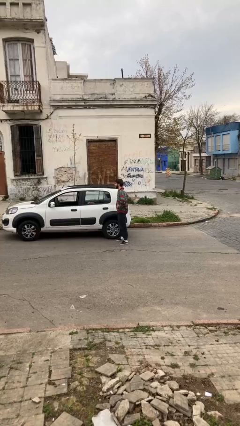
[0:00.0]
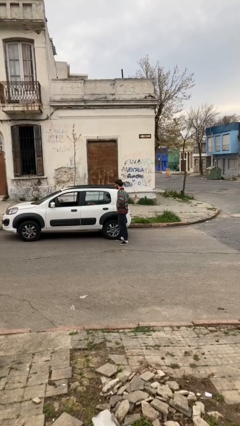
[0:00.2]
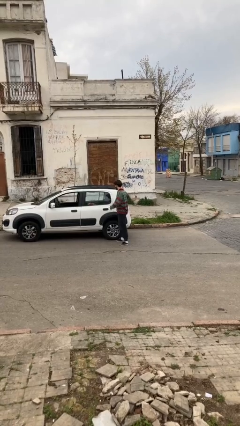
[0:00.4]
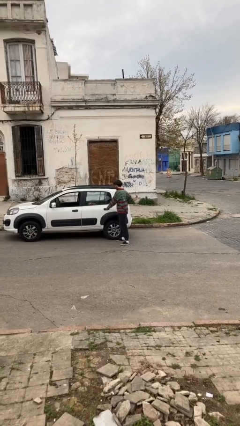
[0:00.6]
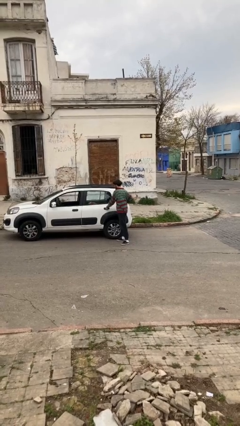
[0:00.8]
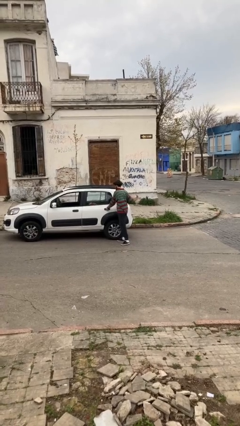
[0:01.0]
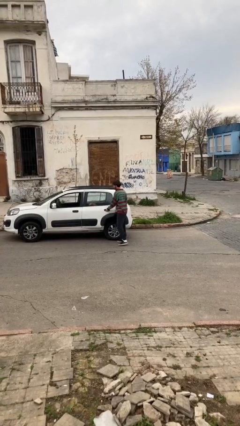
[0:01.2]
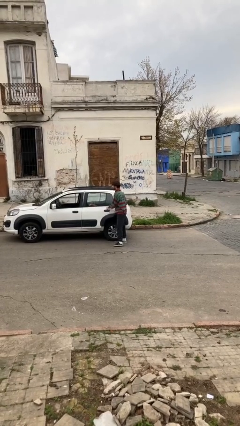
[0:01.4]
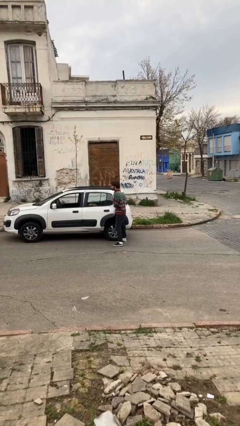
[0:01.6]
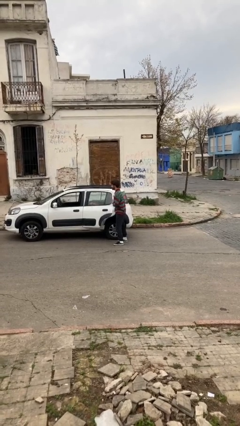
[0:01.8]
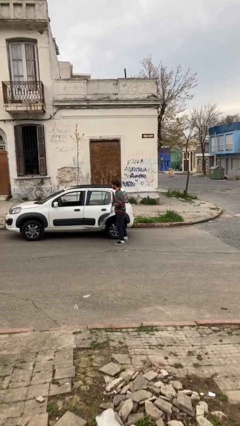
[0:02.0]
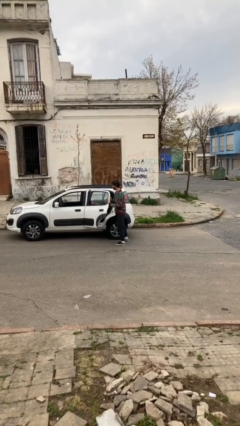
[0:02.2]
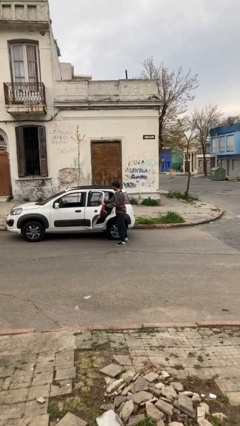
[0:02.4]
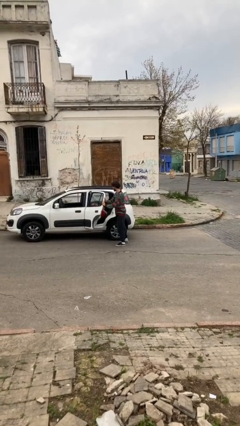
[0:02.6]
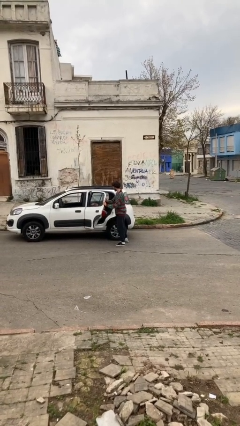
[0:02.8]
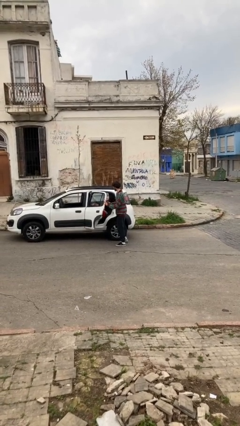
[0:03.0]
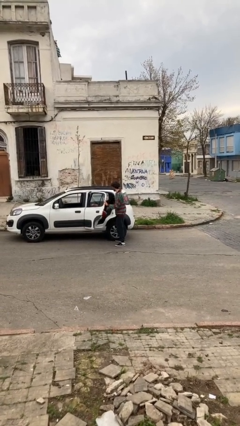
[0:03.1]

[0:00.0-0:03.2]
person opens car door

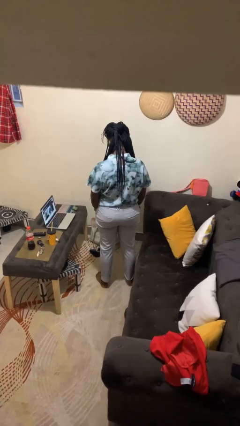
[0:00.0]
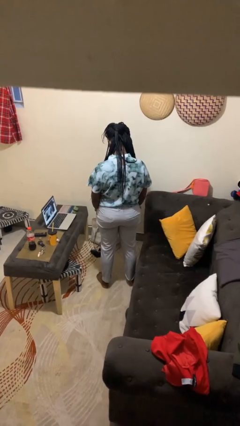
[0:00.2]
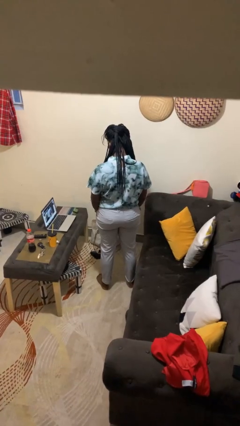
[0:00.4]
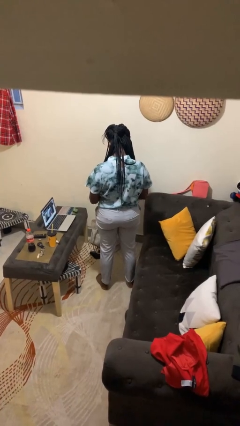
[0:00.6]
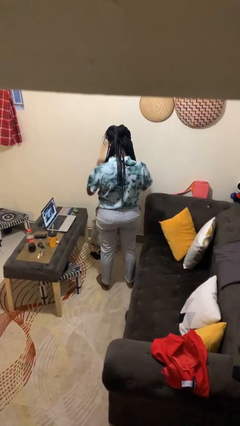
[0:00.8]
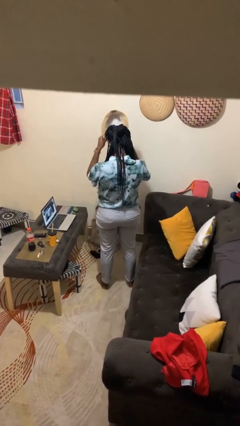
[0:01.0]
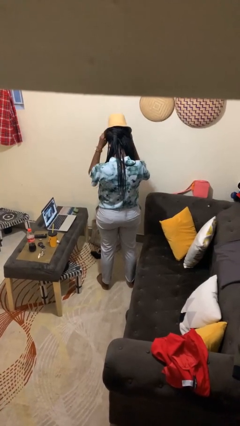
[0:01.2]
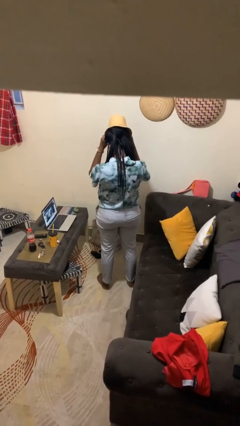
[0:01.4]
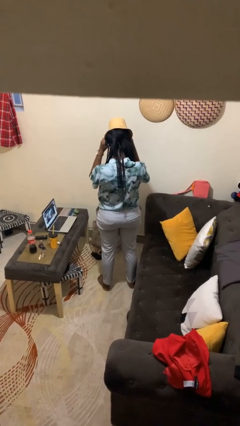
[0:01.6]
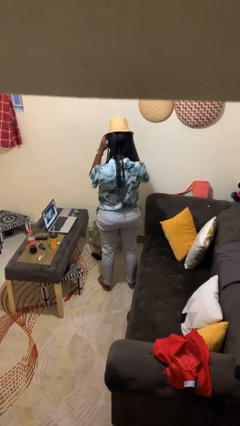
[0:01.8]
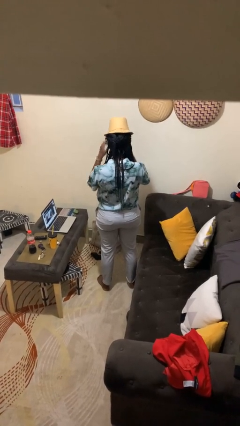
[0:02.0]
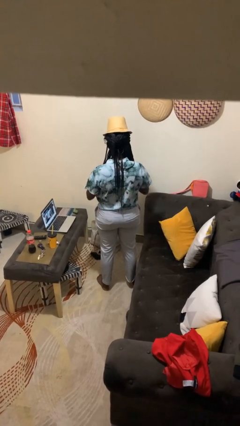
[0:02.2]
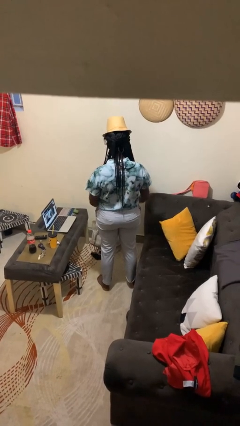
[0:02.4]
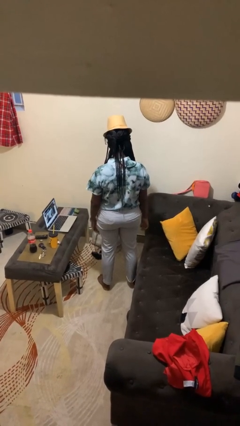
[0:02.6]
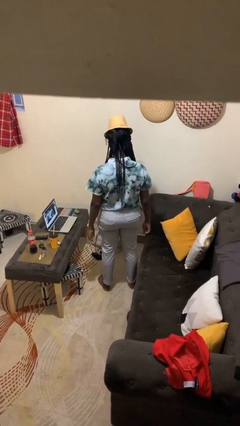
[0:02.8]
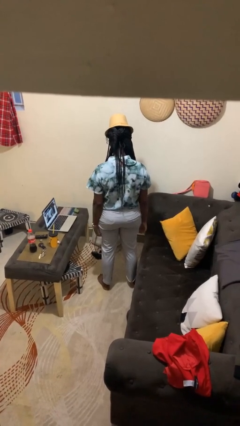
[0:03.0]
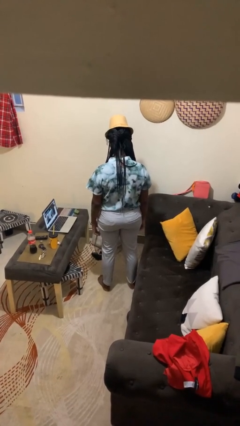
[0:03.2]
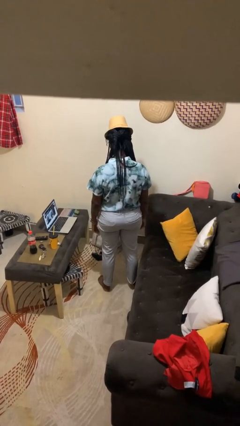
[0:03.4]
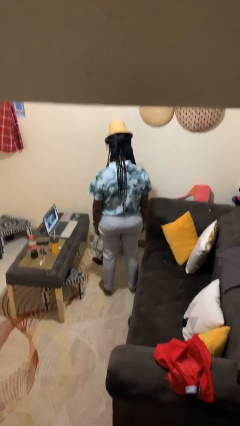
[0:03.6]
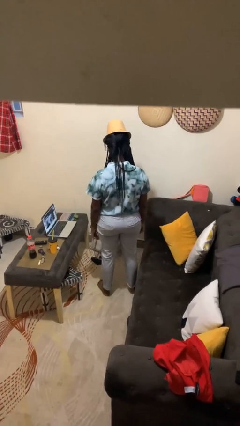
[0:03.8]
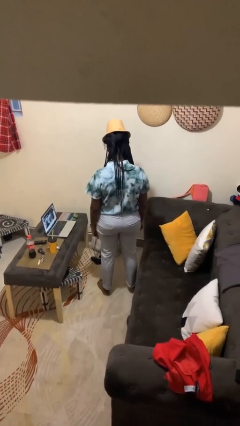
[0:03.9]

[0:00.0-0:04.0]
person puts on hat

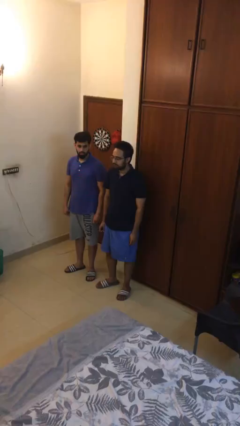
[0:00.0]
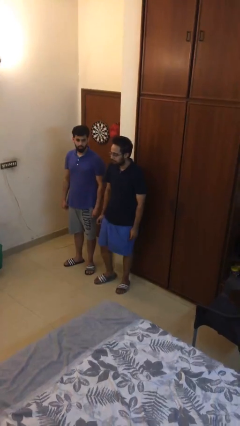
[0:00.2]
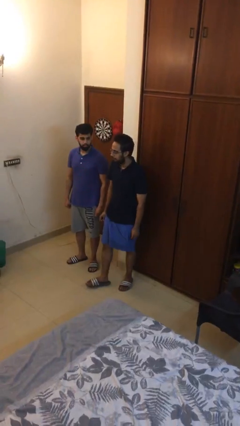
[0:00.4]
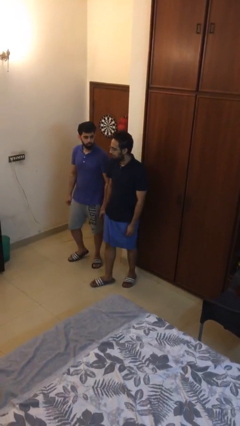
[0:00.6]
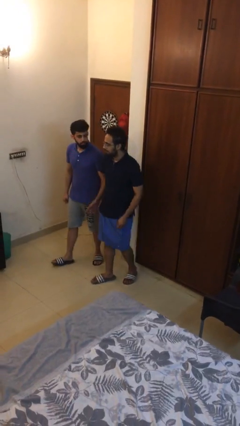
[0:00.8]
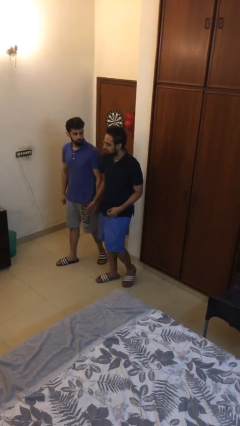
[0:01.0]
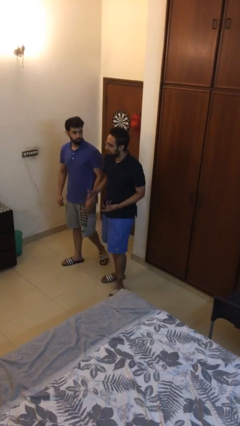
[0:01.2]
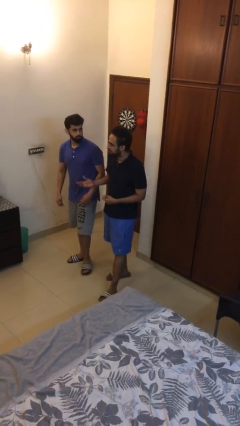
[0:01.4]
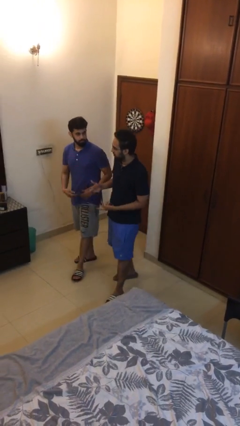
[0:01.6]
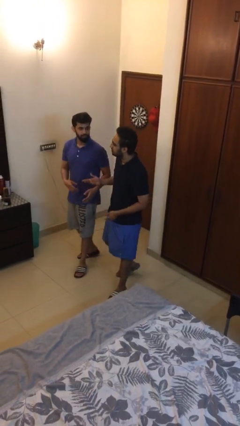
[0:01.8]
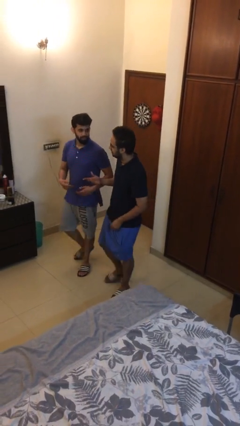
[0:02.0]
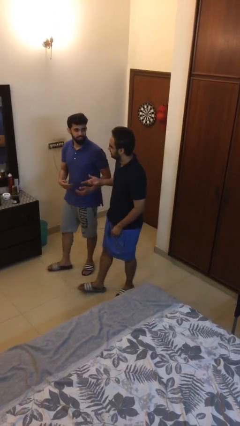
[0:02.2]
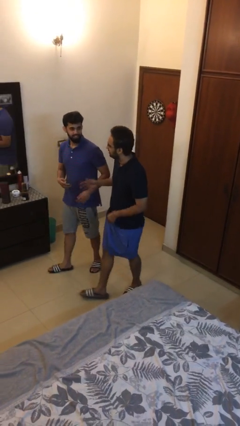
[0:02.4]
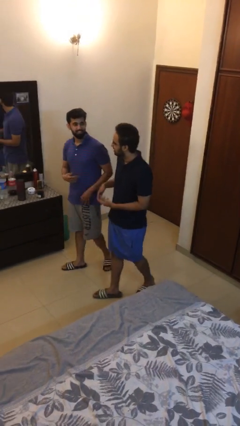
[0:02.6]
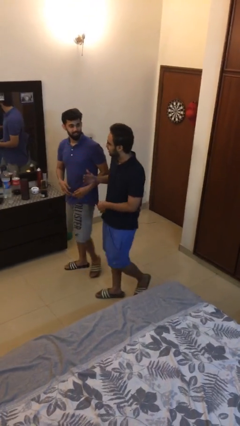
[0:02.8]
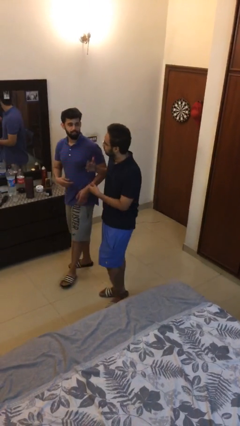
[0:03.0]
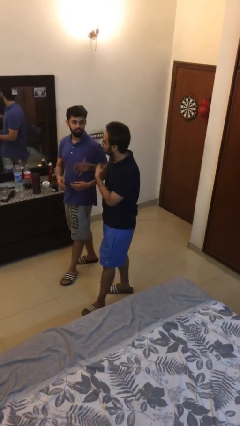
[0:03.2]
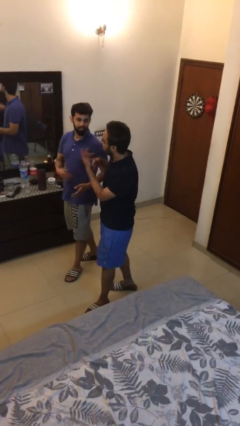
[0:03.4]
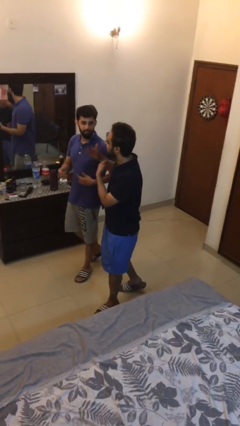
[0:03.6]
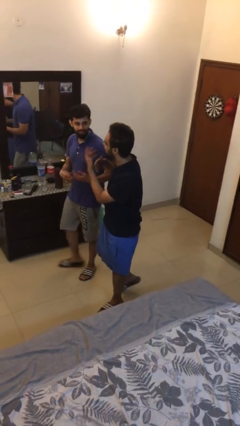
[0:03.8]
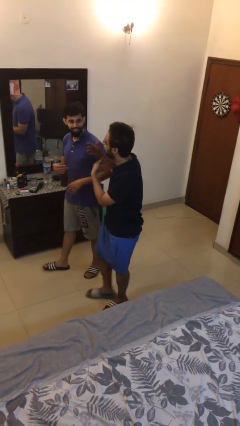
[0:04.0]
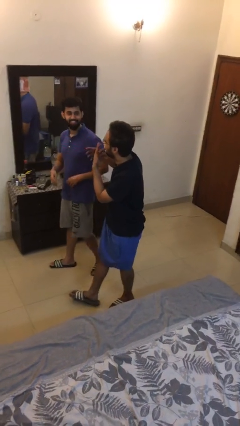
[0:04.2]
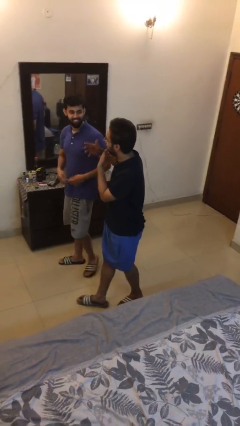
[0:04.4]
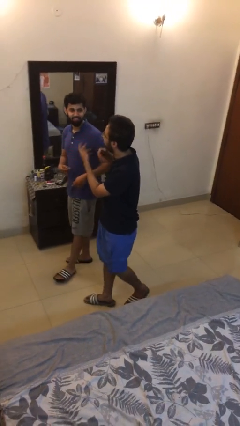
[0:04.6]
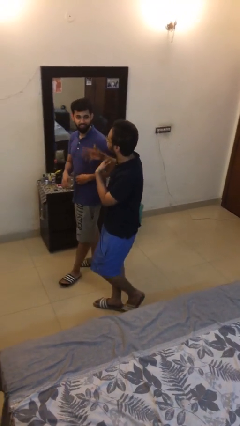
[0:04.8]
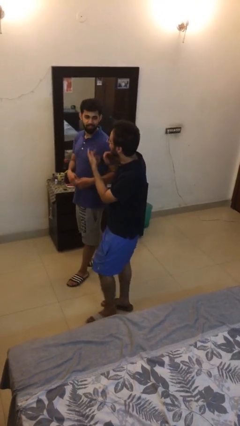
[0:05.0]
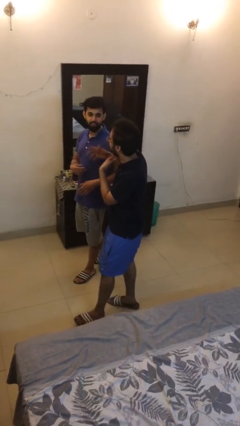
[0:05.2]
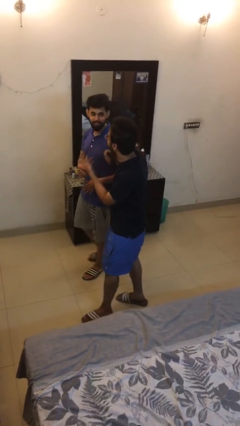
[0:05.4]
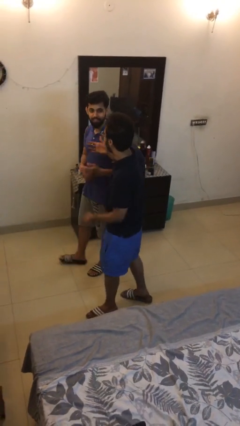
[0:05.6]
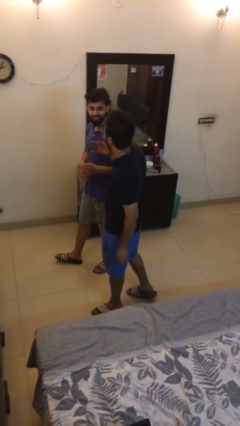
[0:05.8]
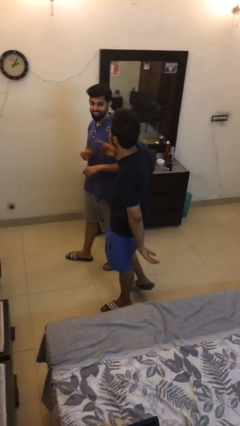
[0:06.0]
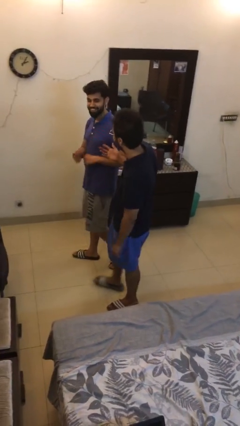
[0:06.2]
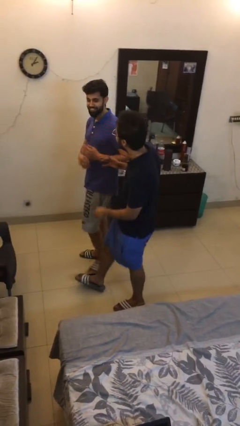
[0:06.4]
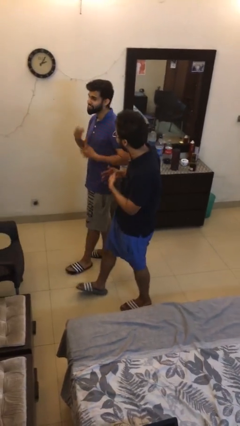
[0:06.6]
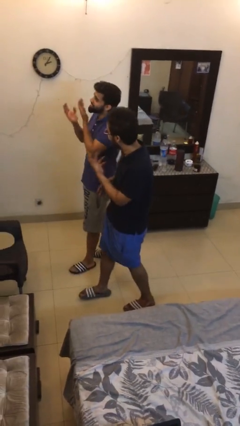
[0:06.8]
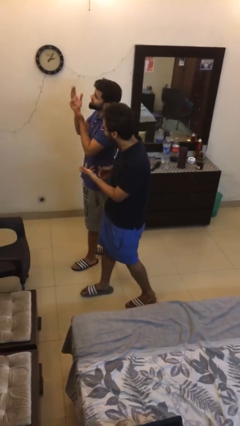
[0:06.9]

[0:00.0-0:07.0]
person talks to person

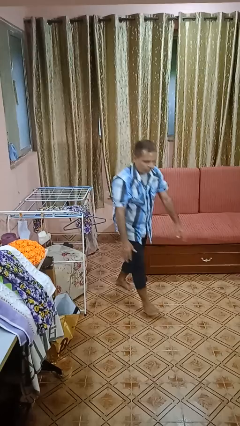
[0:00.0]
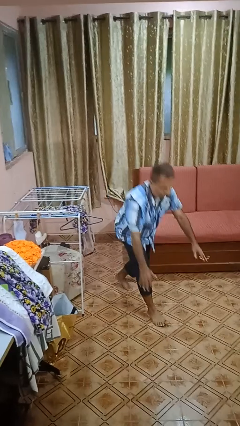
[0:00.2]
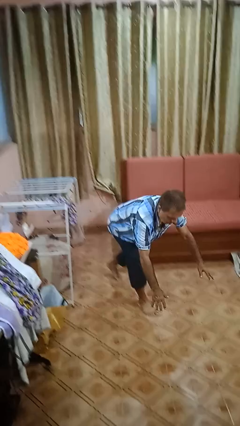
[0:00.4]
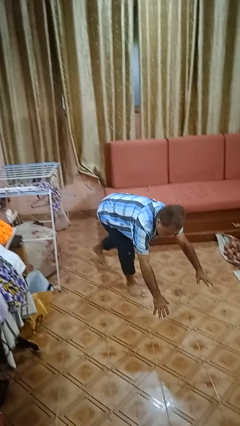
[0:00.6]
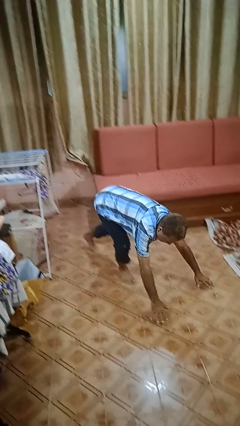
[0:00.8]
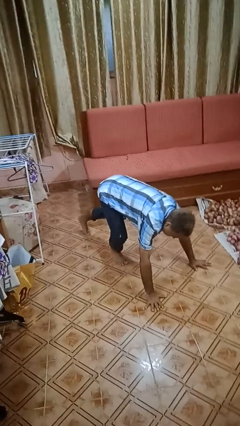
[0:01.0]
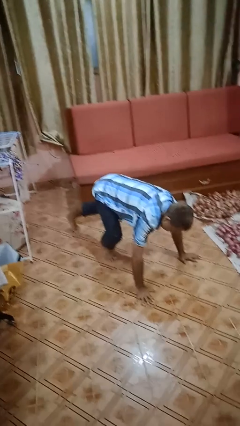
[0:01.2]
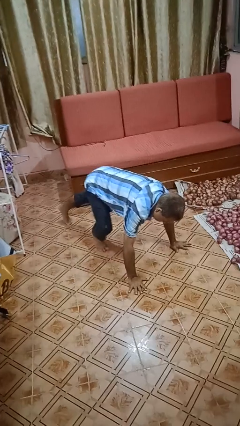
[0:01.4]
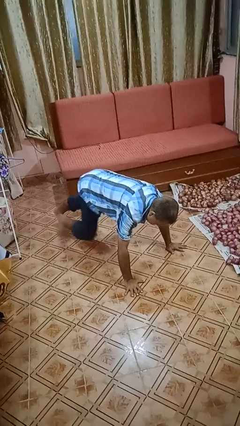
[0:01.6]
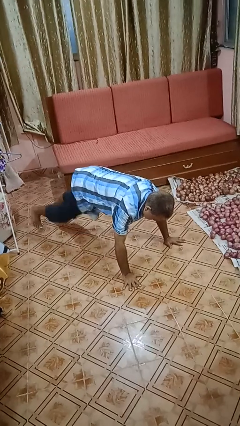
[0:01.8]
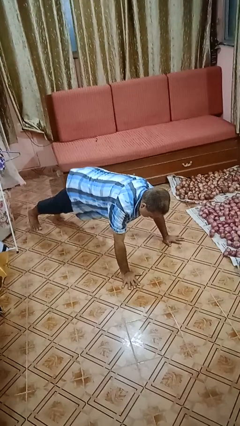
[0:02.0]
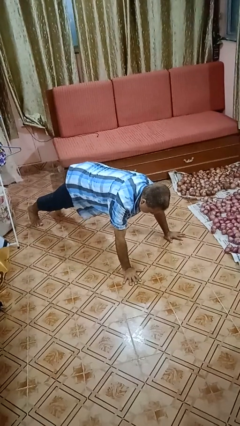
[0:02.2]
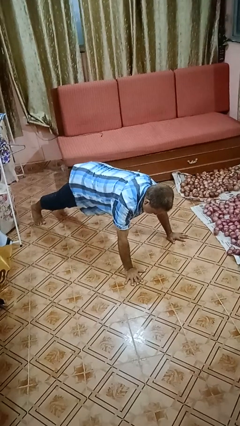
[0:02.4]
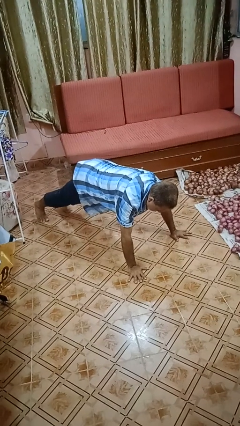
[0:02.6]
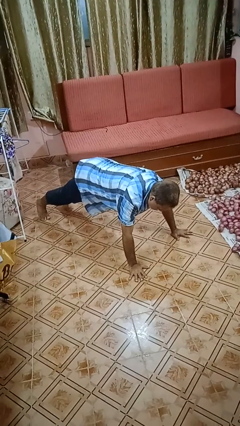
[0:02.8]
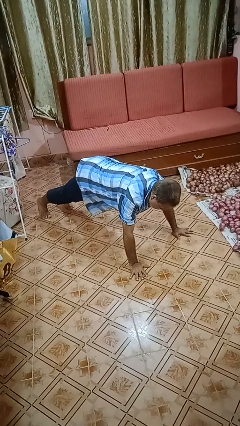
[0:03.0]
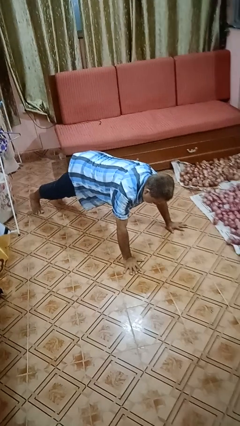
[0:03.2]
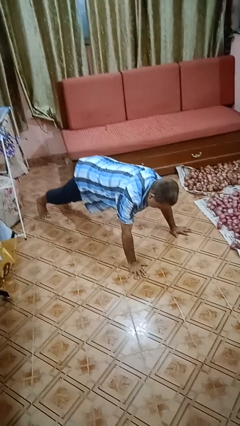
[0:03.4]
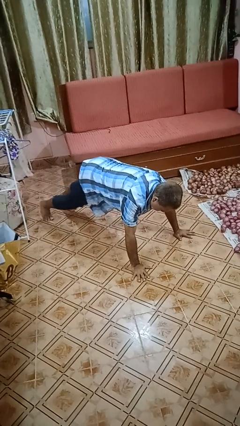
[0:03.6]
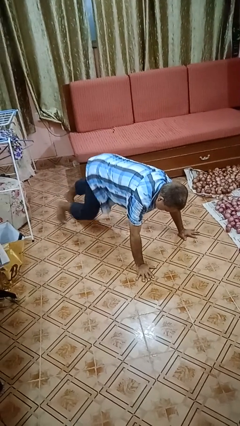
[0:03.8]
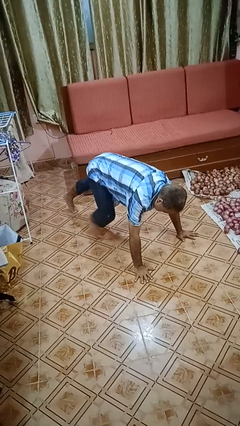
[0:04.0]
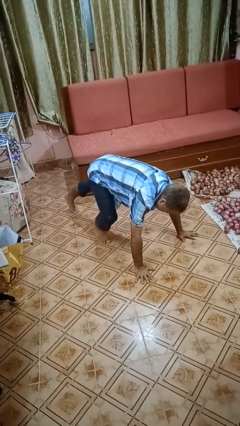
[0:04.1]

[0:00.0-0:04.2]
person exercises with plank
